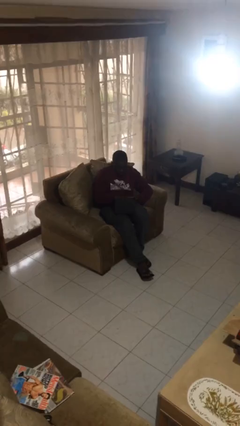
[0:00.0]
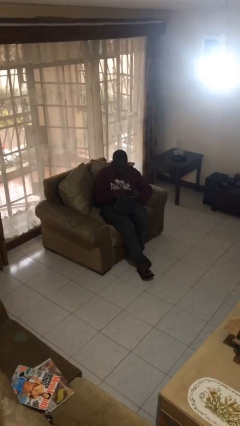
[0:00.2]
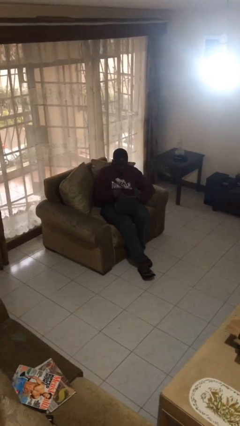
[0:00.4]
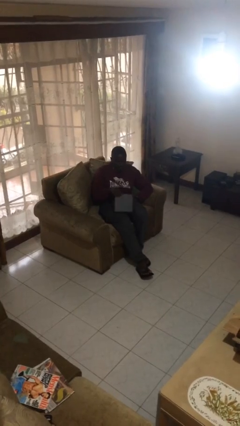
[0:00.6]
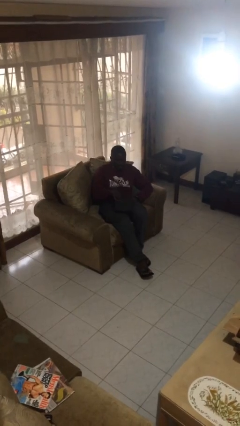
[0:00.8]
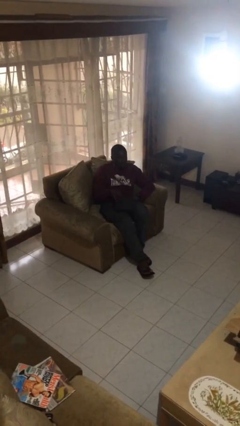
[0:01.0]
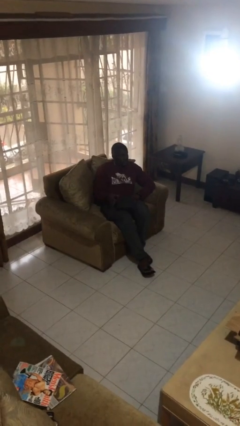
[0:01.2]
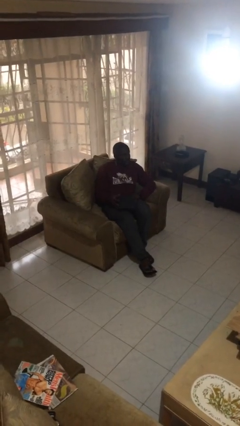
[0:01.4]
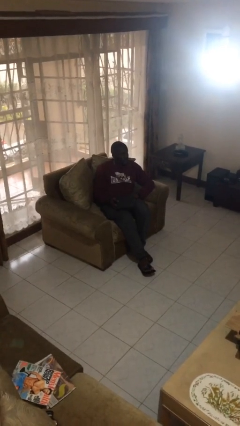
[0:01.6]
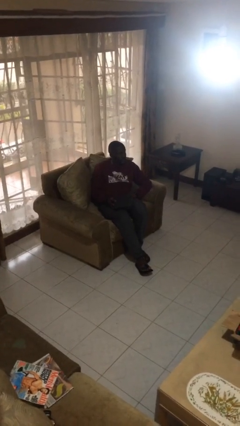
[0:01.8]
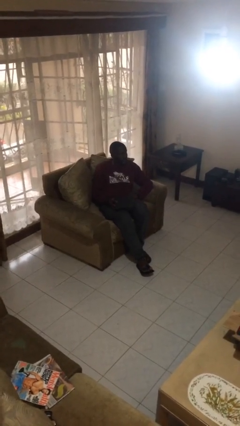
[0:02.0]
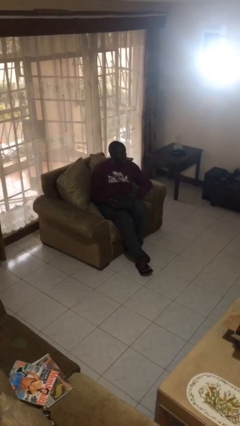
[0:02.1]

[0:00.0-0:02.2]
person closes jewelry box

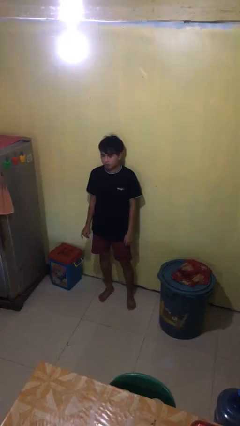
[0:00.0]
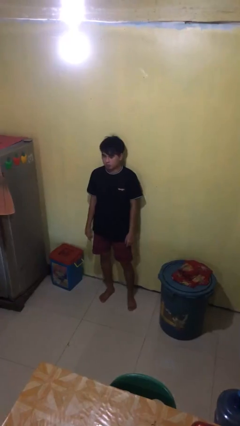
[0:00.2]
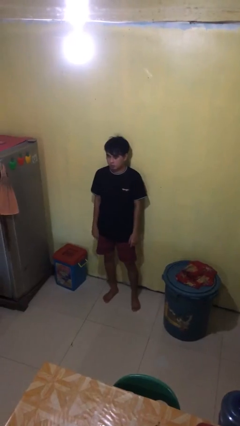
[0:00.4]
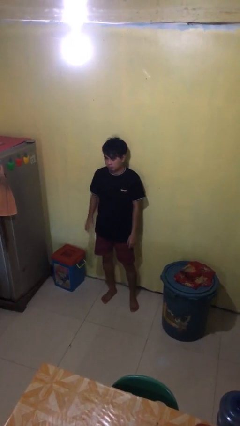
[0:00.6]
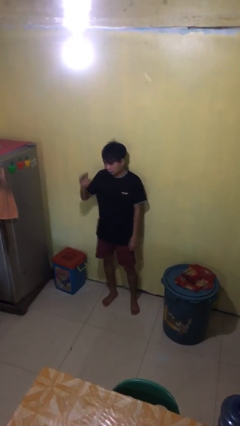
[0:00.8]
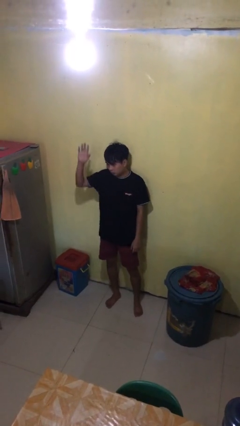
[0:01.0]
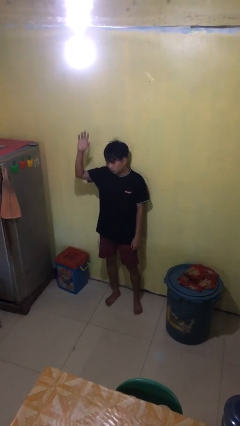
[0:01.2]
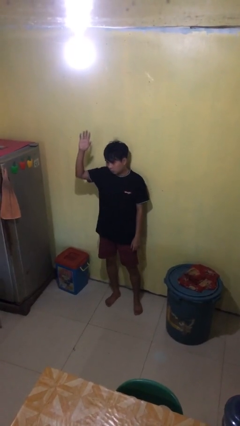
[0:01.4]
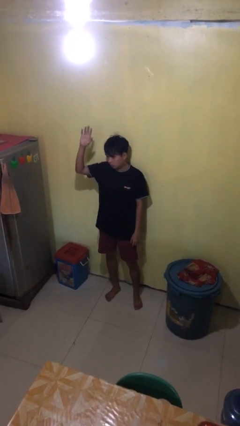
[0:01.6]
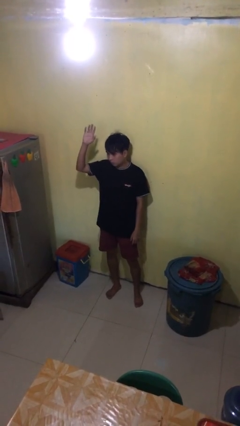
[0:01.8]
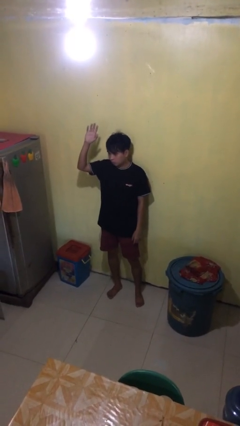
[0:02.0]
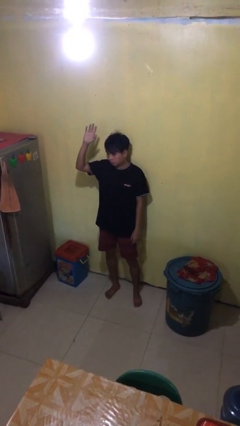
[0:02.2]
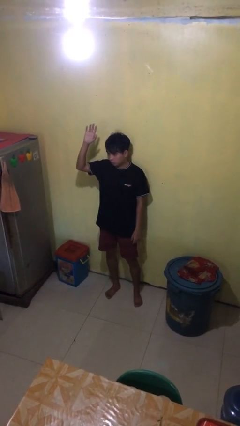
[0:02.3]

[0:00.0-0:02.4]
person gestures raise hand

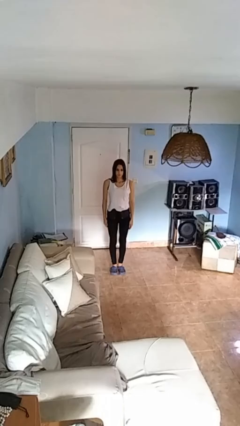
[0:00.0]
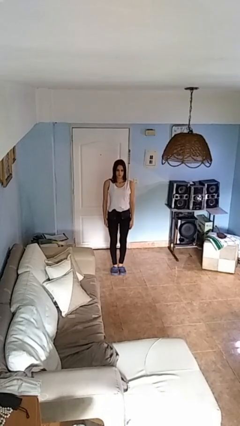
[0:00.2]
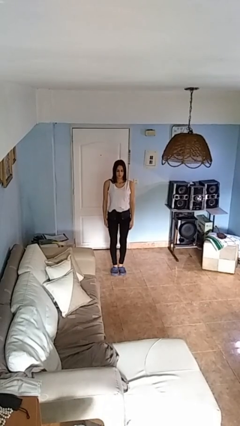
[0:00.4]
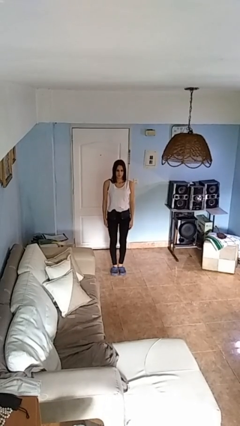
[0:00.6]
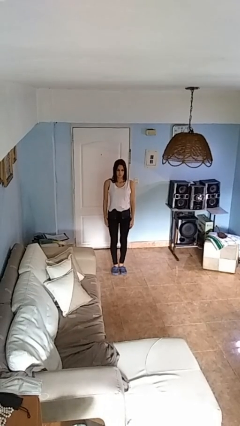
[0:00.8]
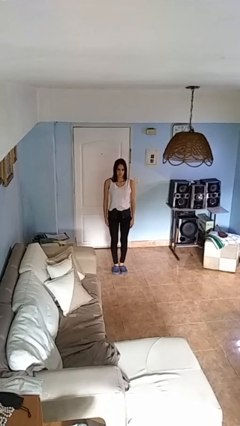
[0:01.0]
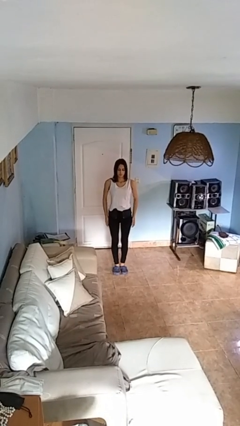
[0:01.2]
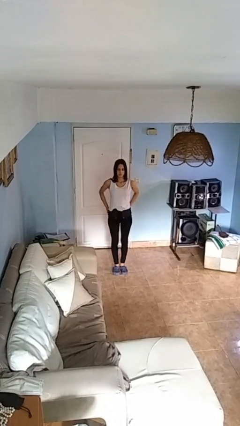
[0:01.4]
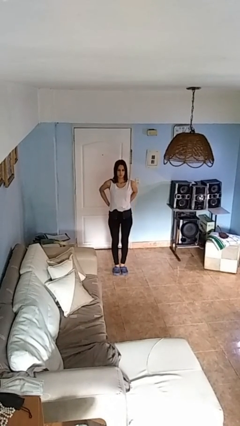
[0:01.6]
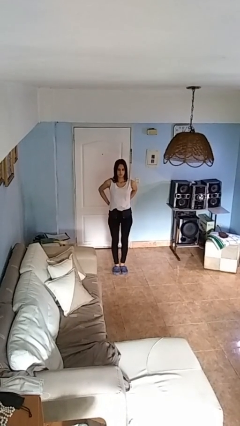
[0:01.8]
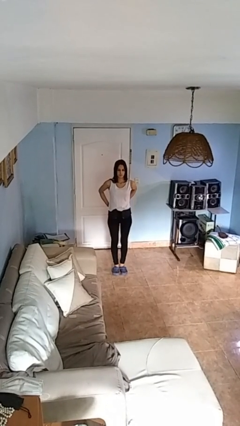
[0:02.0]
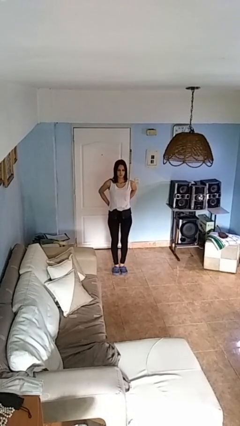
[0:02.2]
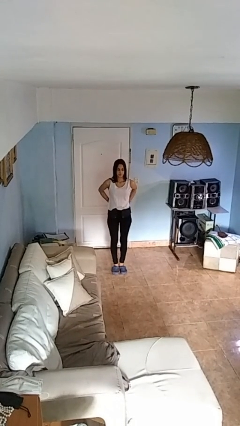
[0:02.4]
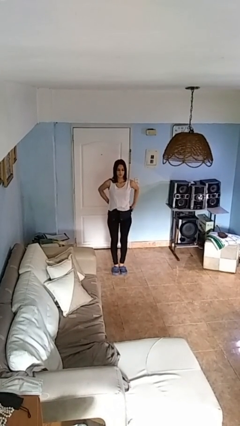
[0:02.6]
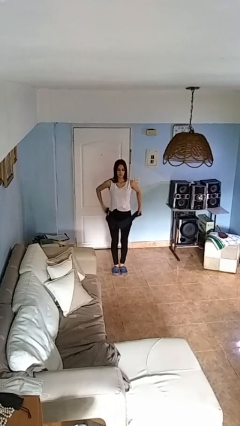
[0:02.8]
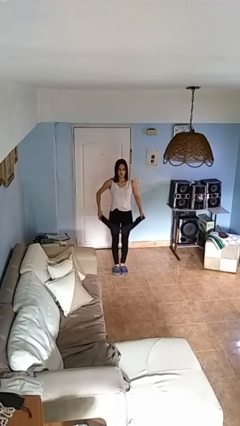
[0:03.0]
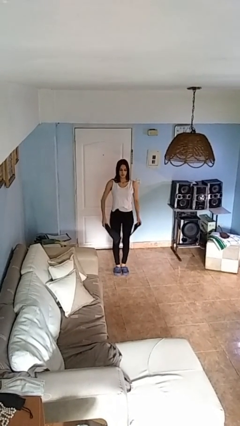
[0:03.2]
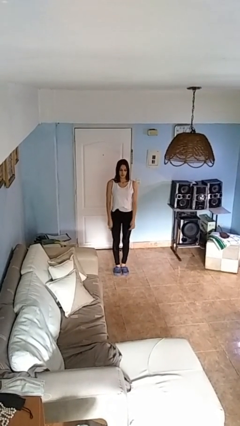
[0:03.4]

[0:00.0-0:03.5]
person takes off belt

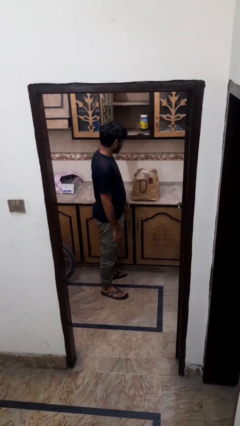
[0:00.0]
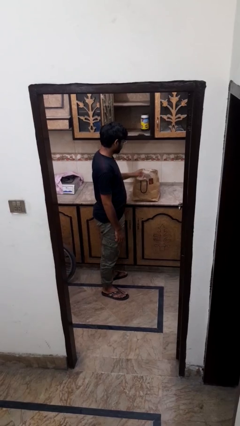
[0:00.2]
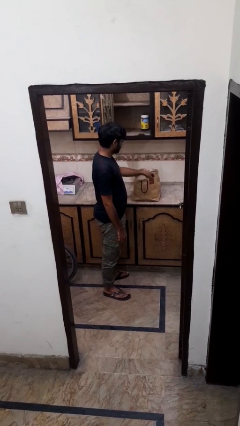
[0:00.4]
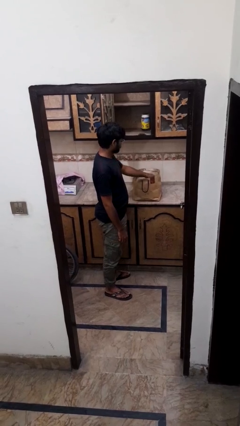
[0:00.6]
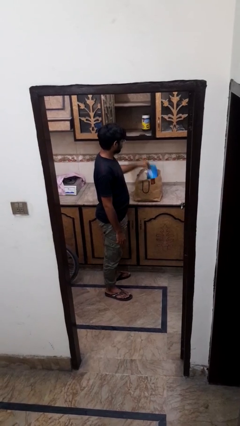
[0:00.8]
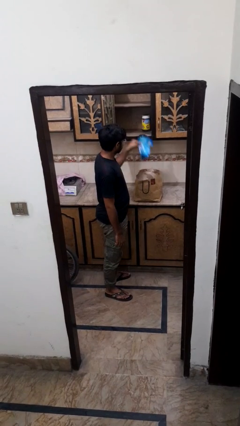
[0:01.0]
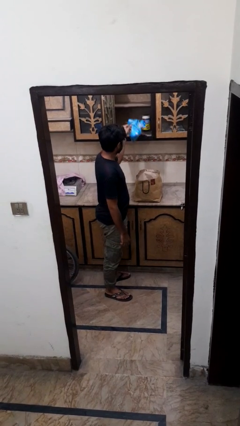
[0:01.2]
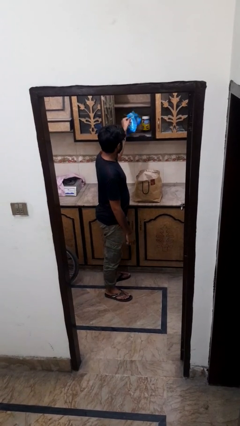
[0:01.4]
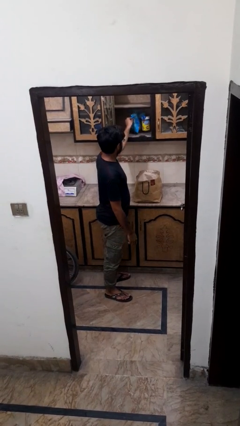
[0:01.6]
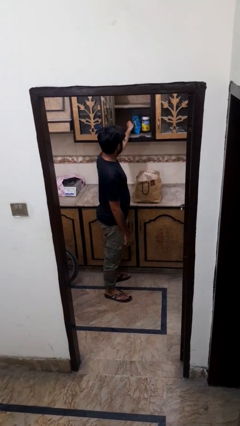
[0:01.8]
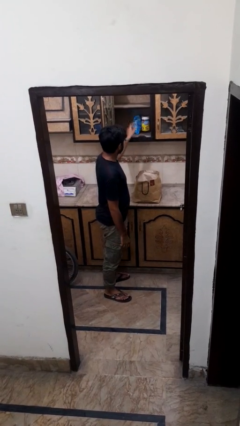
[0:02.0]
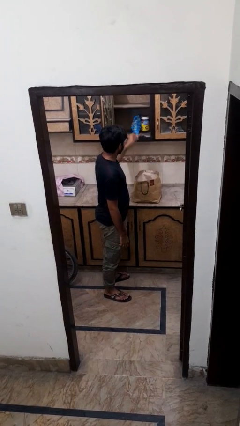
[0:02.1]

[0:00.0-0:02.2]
person loads groceries into cabinet

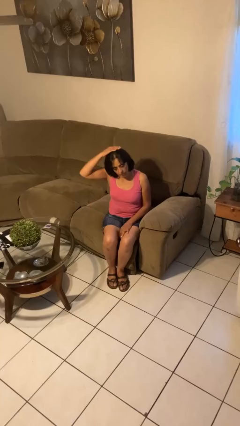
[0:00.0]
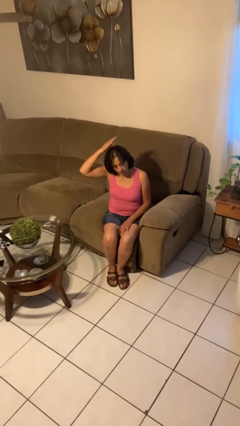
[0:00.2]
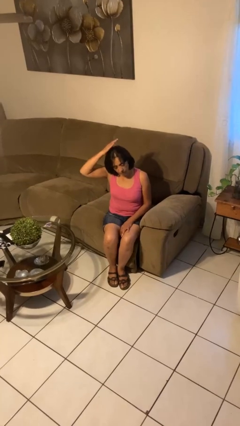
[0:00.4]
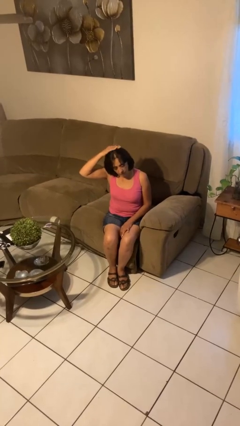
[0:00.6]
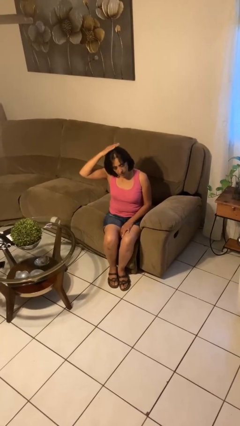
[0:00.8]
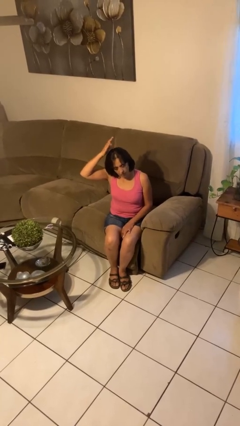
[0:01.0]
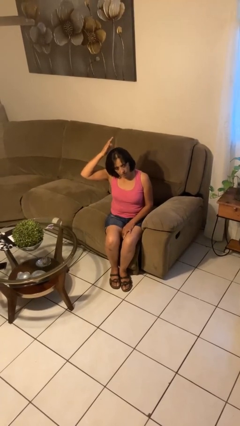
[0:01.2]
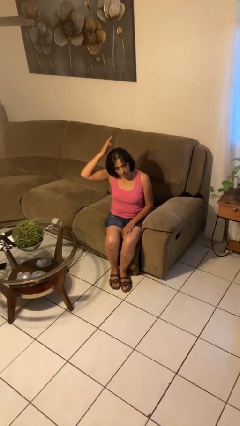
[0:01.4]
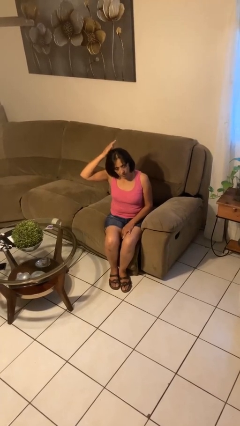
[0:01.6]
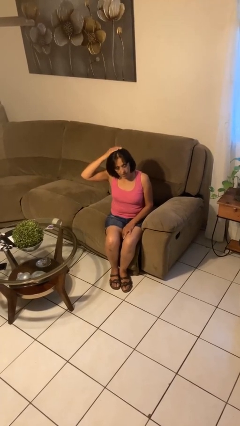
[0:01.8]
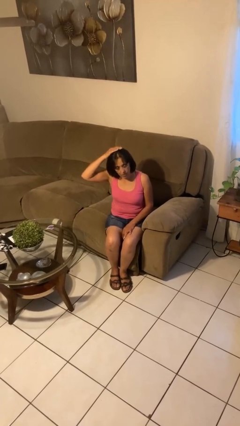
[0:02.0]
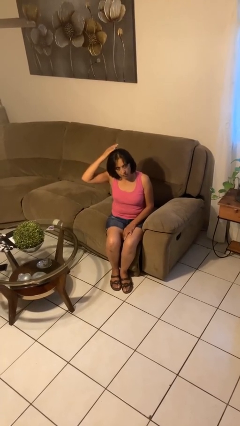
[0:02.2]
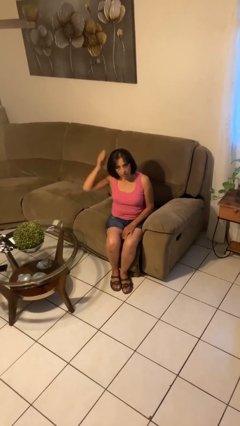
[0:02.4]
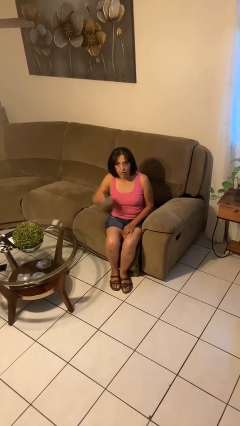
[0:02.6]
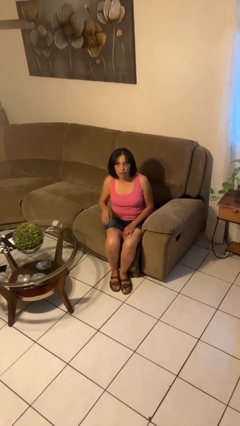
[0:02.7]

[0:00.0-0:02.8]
person pats head

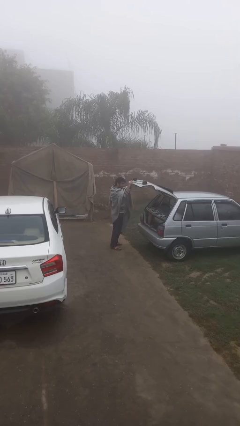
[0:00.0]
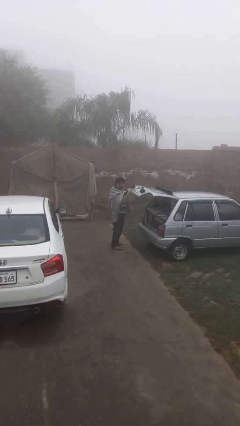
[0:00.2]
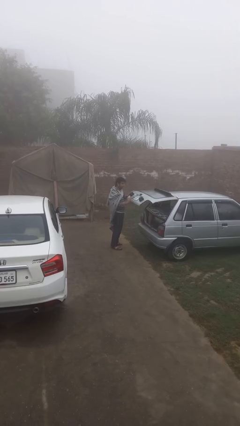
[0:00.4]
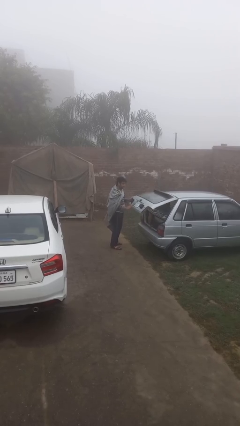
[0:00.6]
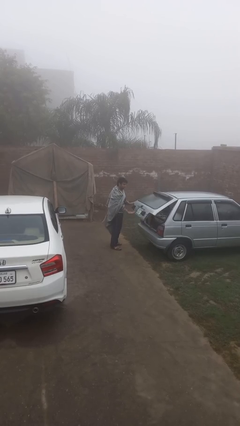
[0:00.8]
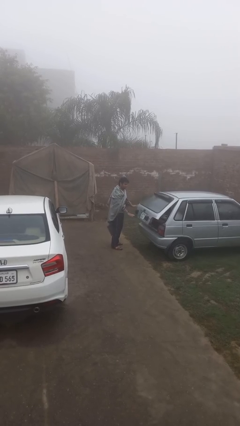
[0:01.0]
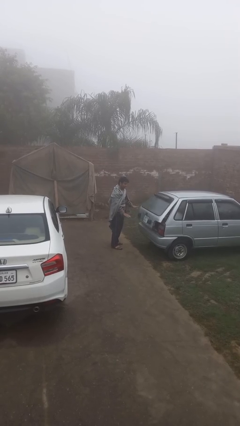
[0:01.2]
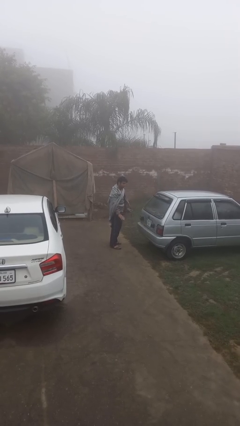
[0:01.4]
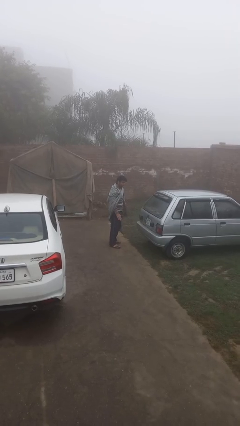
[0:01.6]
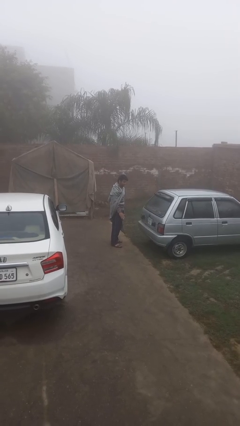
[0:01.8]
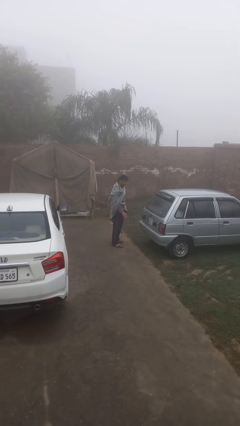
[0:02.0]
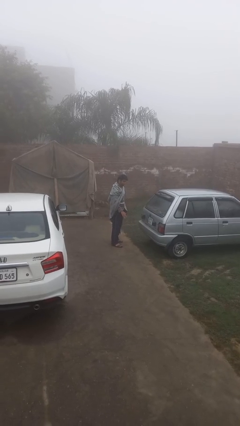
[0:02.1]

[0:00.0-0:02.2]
person closes car trunk

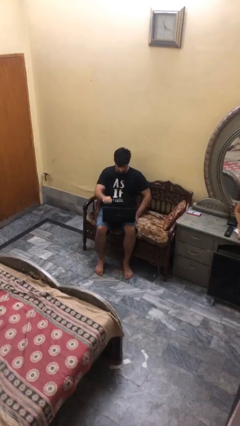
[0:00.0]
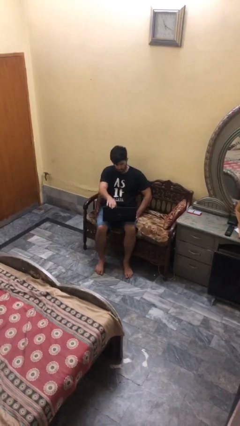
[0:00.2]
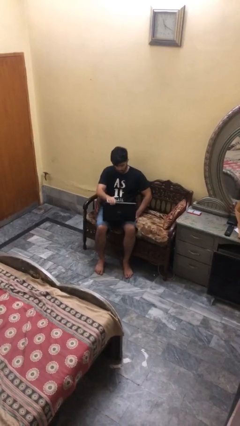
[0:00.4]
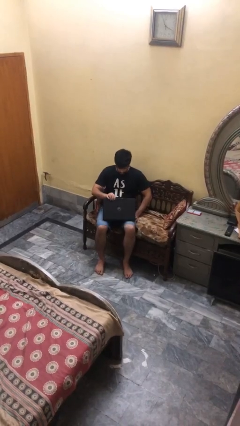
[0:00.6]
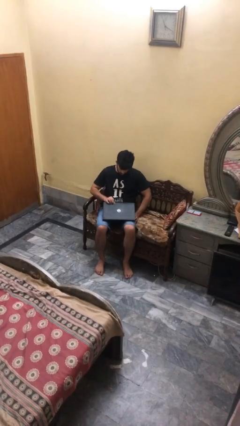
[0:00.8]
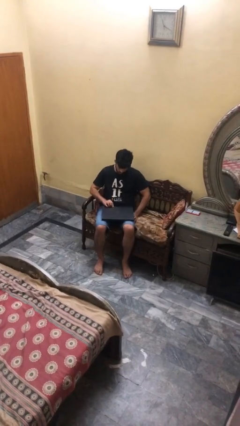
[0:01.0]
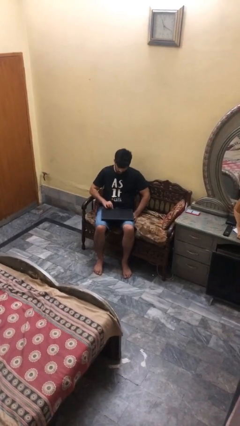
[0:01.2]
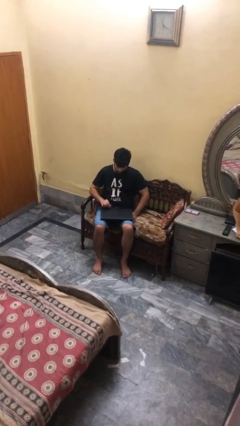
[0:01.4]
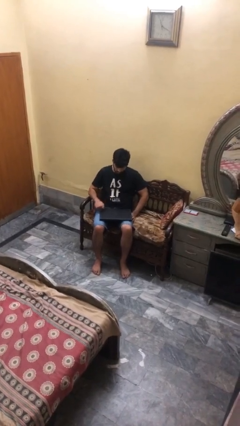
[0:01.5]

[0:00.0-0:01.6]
person closes laptop

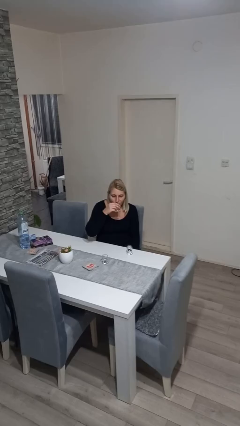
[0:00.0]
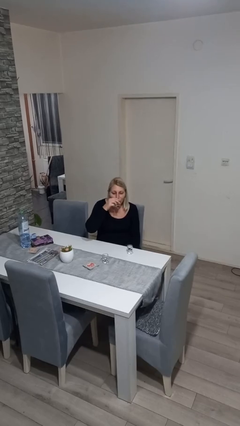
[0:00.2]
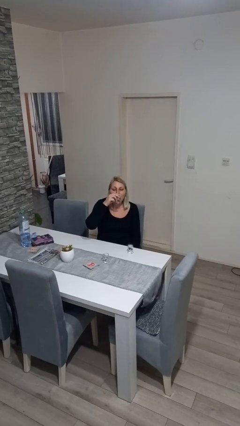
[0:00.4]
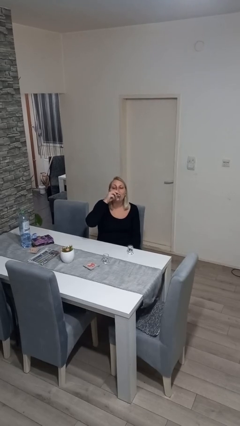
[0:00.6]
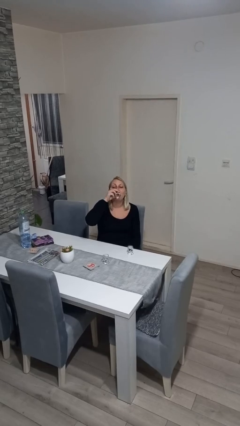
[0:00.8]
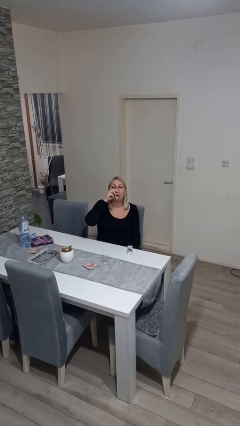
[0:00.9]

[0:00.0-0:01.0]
person drinks from shotglass
